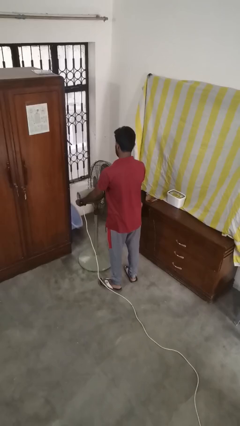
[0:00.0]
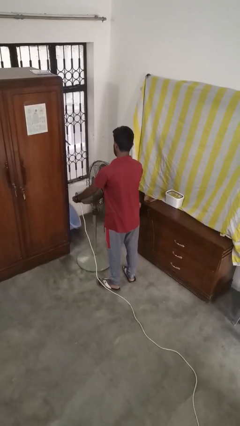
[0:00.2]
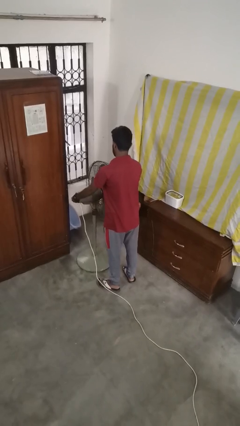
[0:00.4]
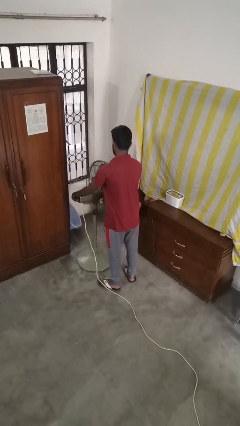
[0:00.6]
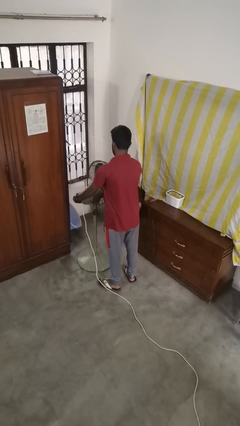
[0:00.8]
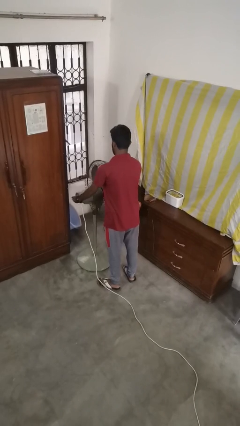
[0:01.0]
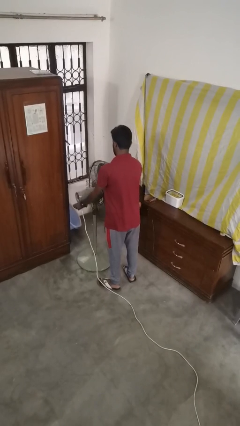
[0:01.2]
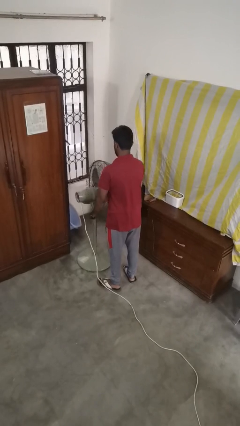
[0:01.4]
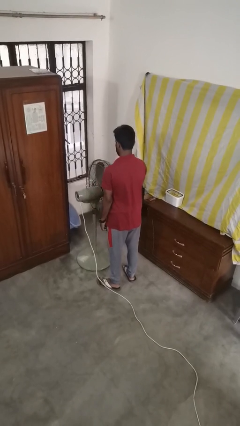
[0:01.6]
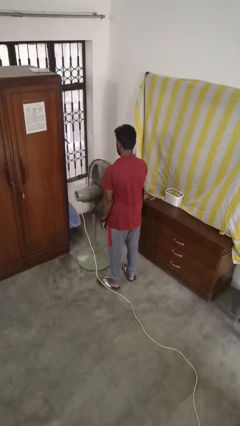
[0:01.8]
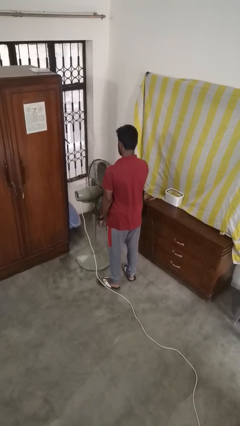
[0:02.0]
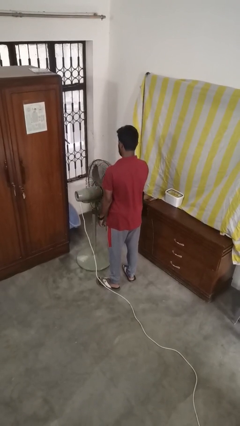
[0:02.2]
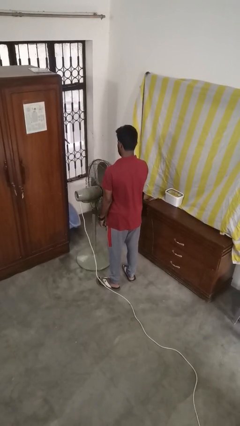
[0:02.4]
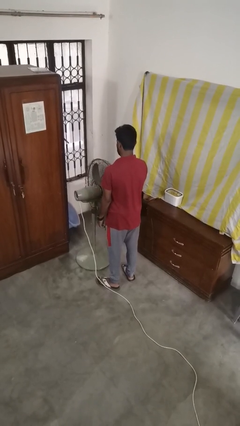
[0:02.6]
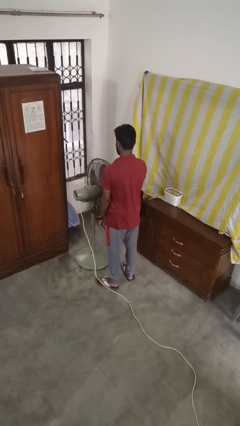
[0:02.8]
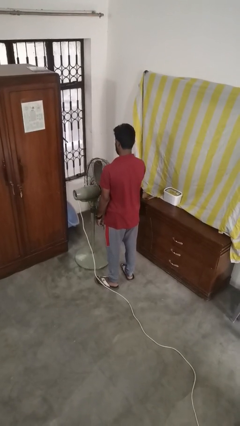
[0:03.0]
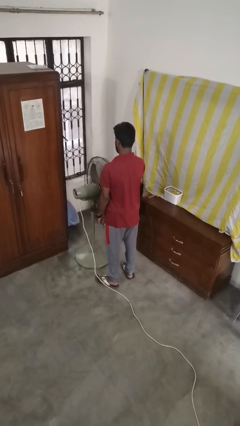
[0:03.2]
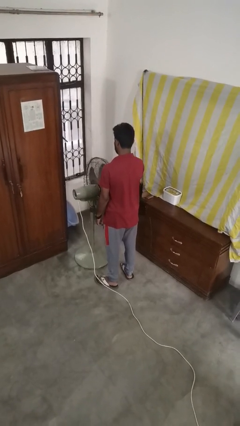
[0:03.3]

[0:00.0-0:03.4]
person turns on fan

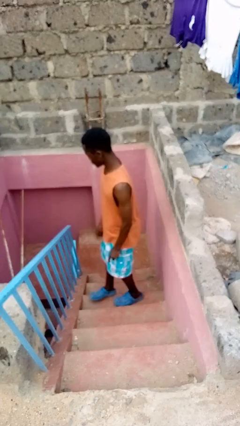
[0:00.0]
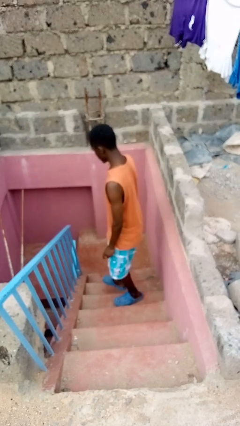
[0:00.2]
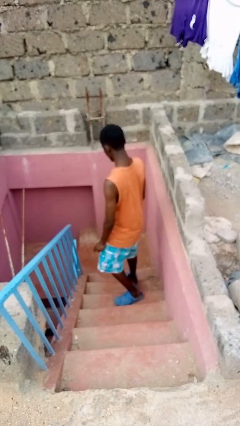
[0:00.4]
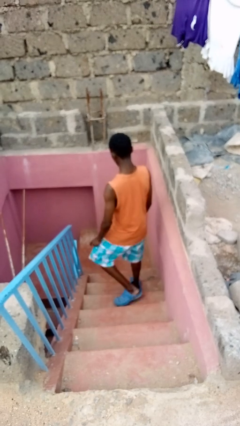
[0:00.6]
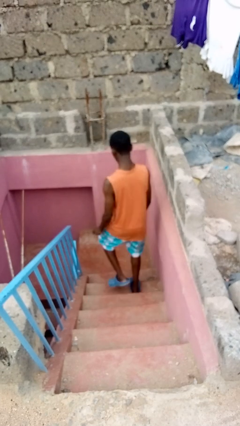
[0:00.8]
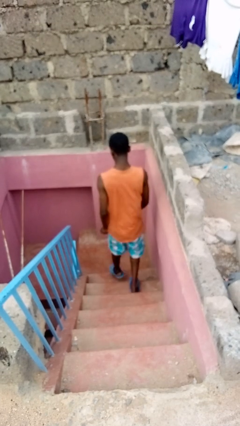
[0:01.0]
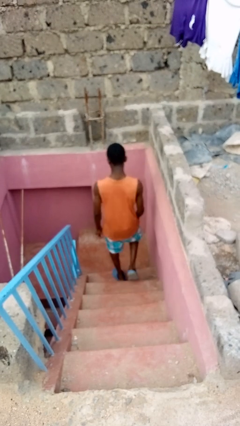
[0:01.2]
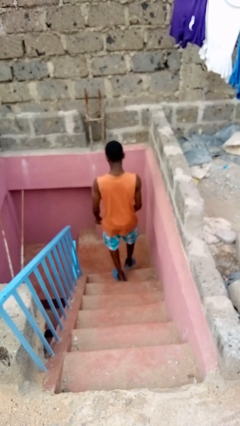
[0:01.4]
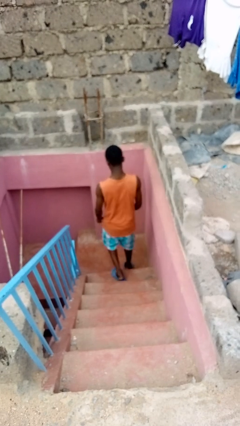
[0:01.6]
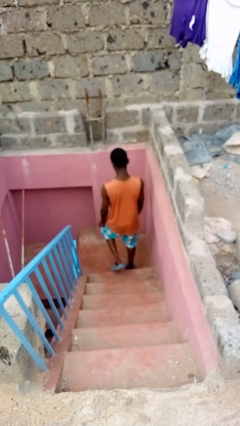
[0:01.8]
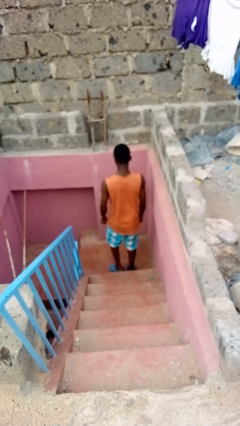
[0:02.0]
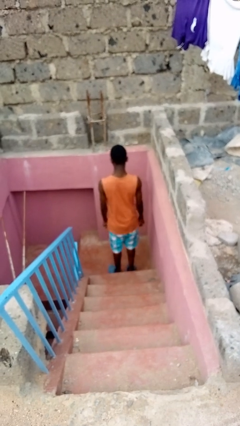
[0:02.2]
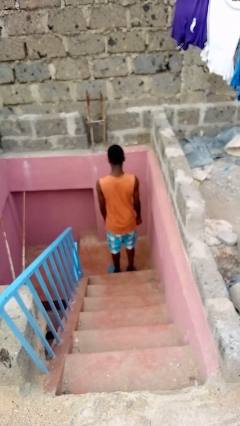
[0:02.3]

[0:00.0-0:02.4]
person climbs down stairs

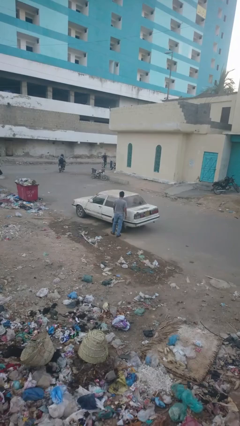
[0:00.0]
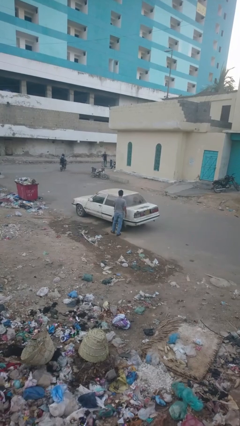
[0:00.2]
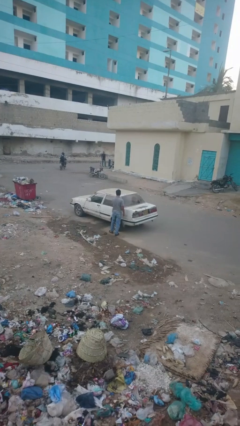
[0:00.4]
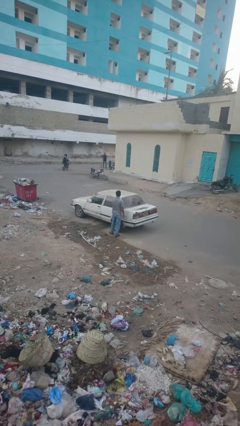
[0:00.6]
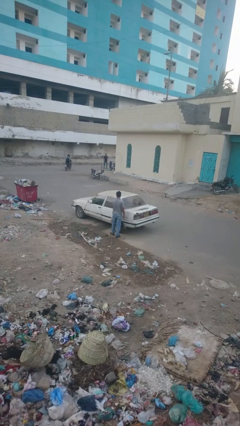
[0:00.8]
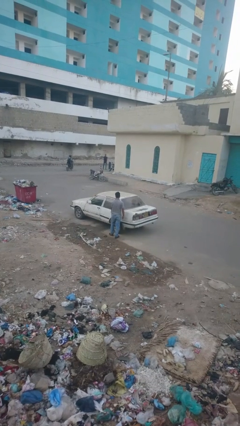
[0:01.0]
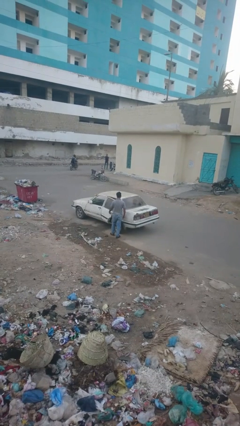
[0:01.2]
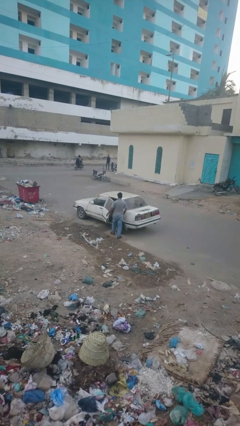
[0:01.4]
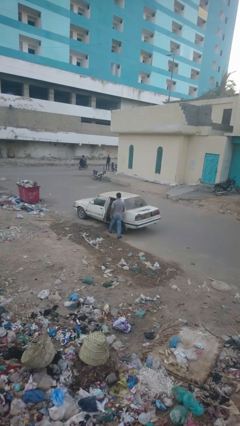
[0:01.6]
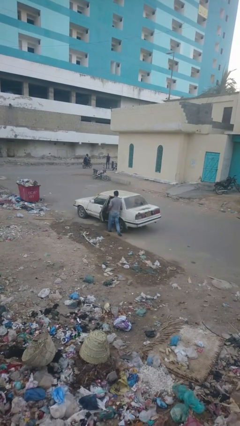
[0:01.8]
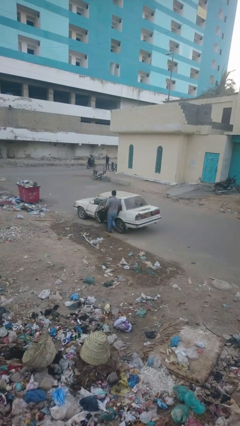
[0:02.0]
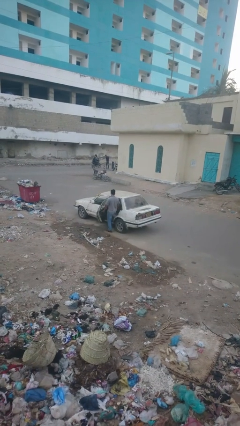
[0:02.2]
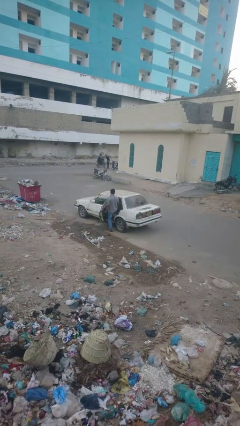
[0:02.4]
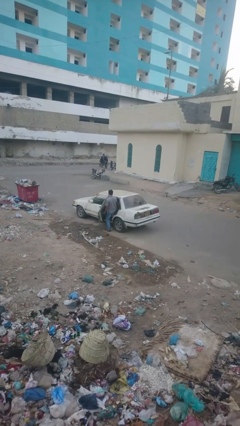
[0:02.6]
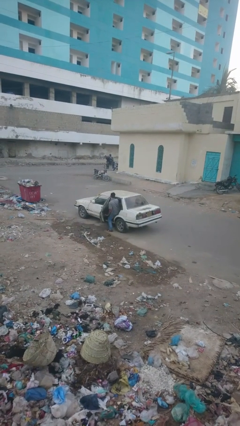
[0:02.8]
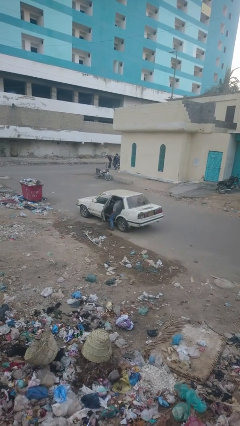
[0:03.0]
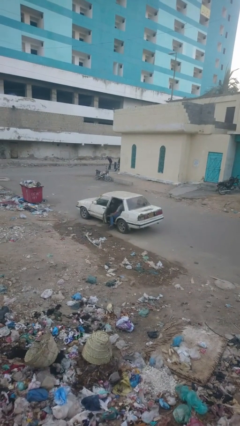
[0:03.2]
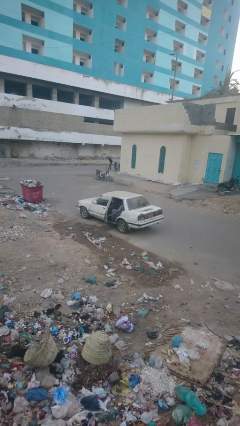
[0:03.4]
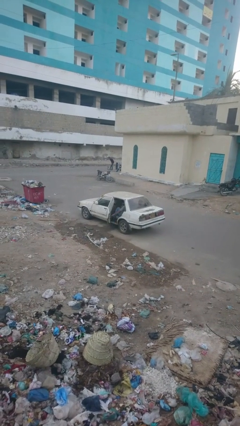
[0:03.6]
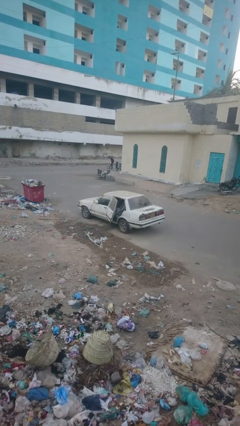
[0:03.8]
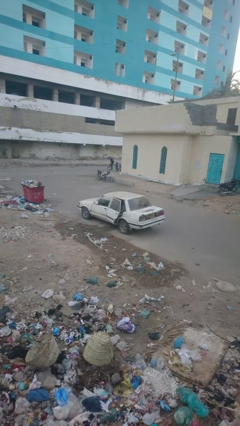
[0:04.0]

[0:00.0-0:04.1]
car picks up person

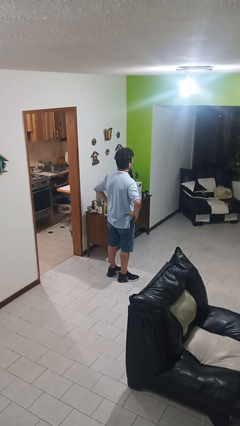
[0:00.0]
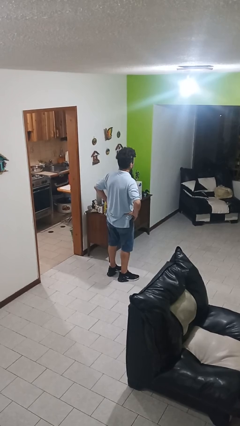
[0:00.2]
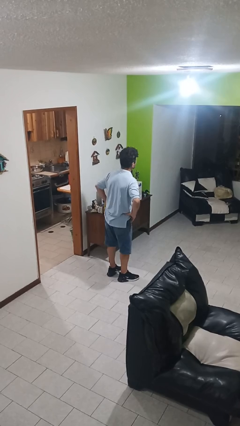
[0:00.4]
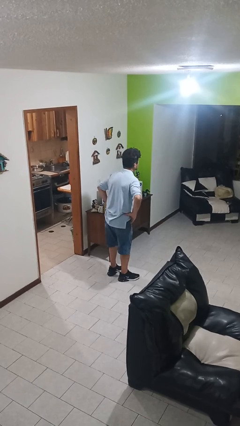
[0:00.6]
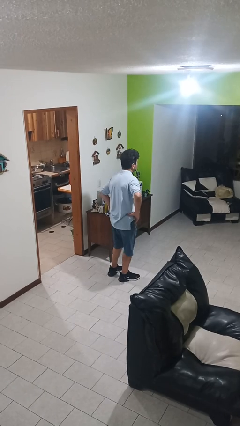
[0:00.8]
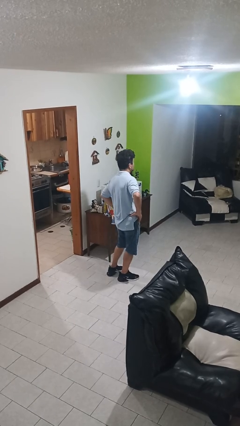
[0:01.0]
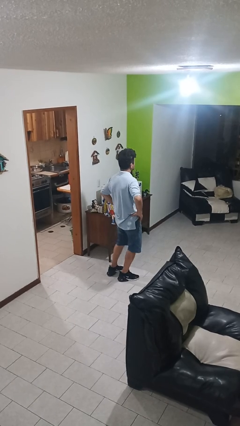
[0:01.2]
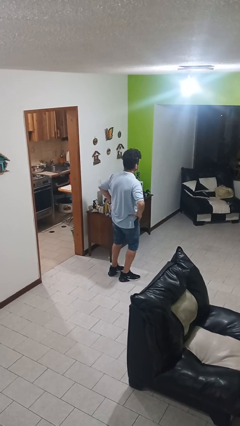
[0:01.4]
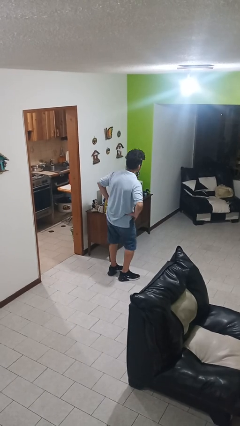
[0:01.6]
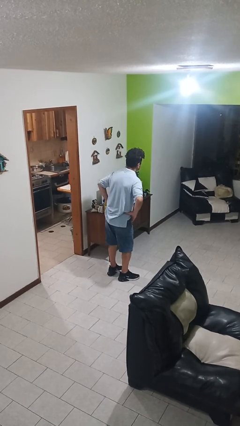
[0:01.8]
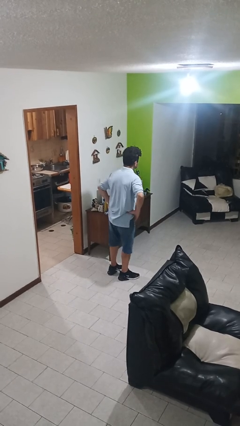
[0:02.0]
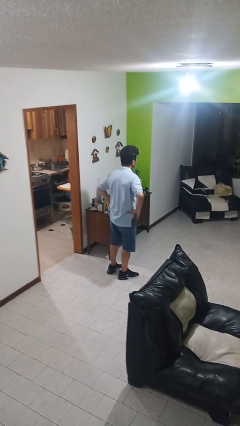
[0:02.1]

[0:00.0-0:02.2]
person wiggles hips

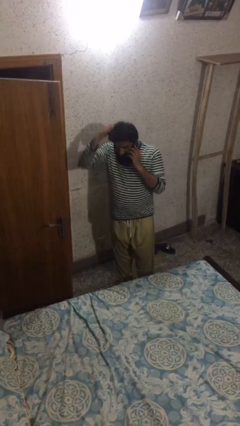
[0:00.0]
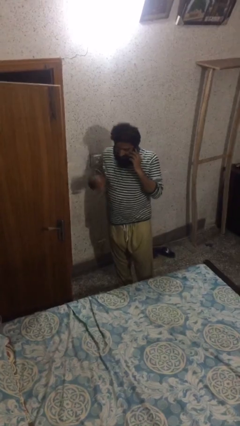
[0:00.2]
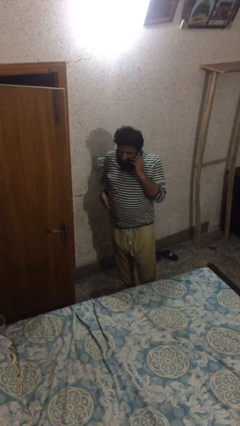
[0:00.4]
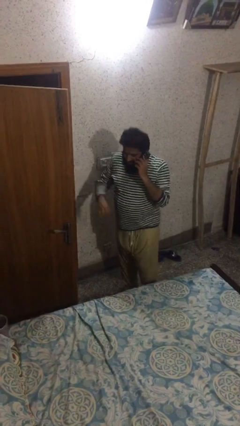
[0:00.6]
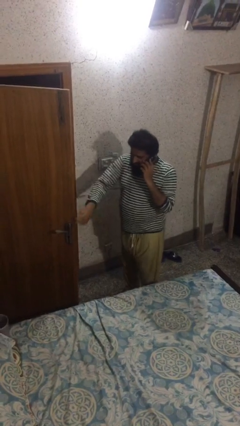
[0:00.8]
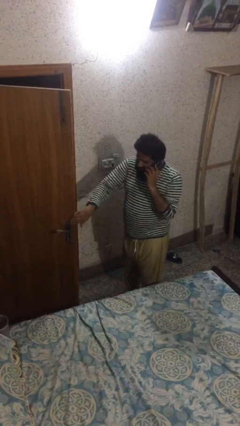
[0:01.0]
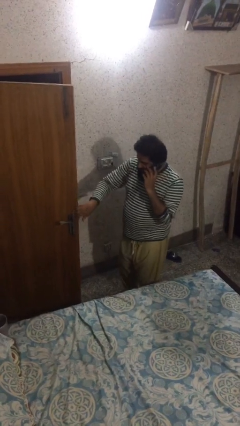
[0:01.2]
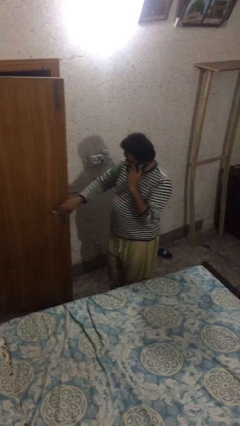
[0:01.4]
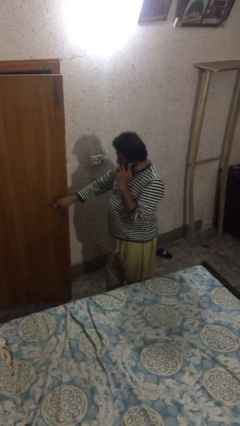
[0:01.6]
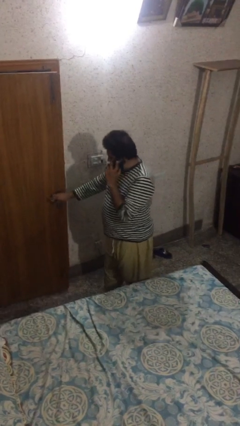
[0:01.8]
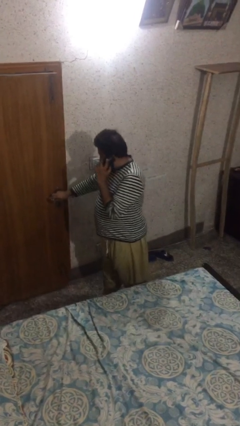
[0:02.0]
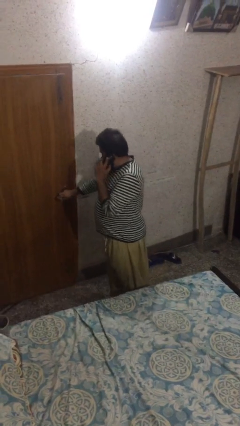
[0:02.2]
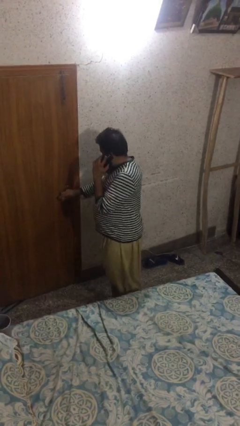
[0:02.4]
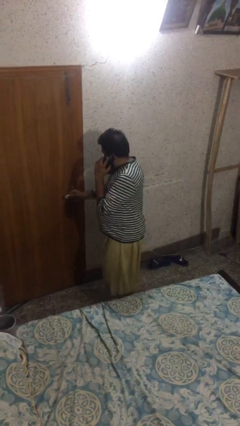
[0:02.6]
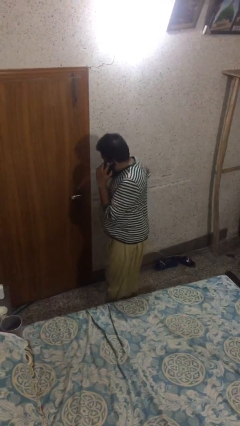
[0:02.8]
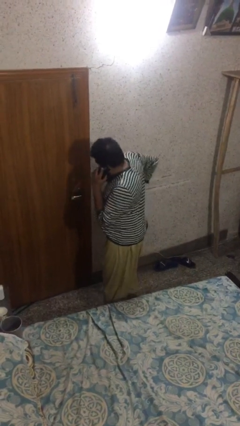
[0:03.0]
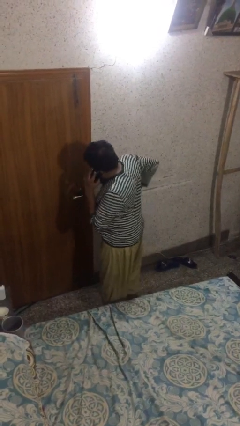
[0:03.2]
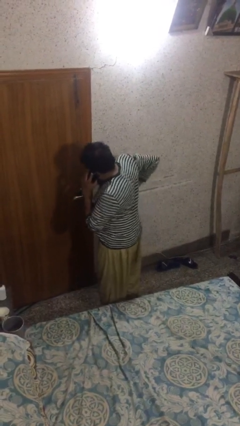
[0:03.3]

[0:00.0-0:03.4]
person closes facility door

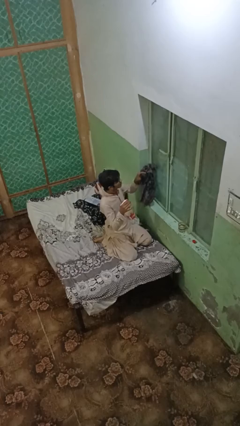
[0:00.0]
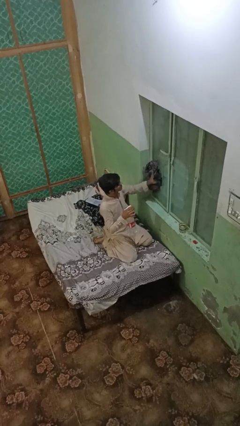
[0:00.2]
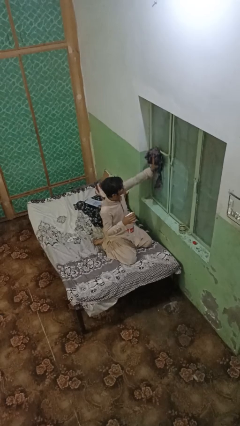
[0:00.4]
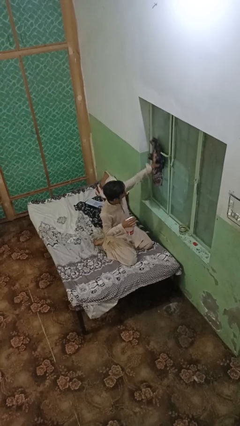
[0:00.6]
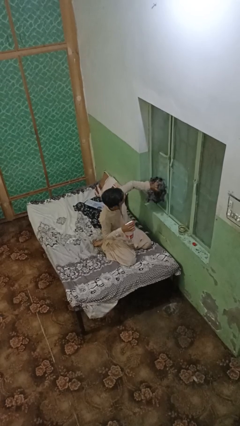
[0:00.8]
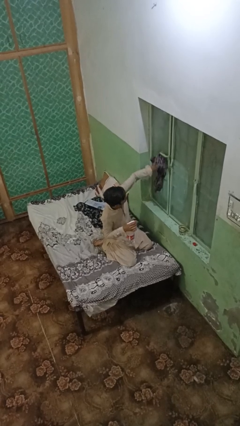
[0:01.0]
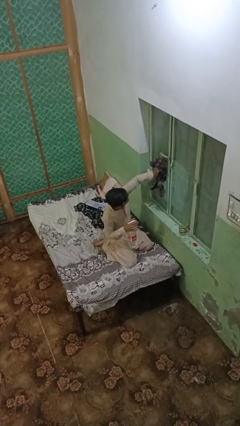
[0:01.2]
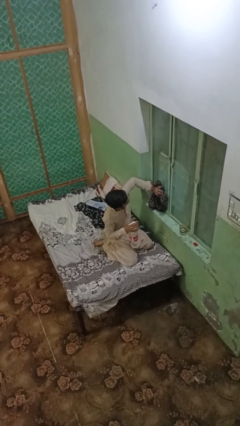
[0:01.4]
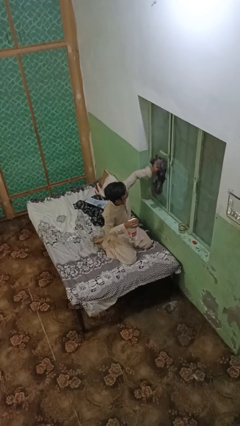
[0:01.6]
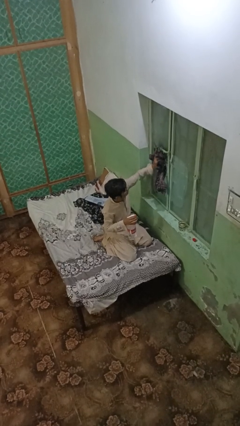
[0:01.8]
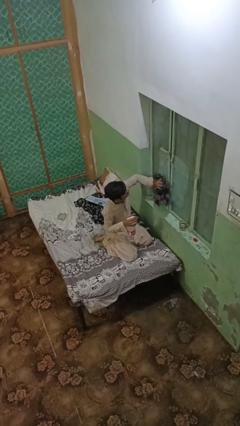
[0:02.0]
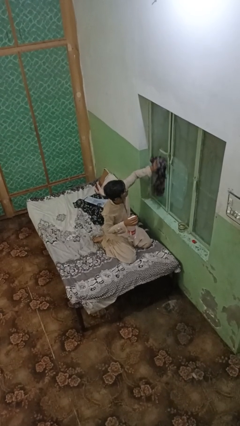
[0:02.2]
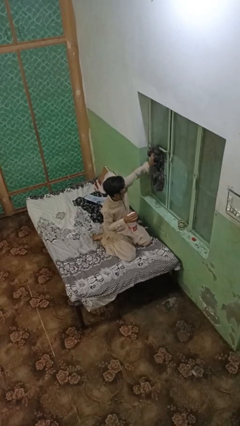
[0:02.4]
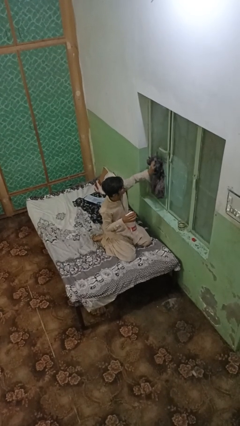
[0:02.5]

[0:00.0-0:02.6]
person washes window
